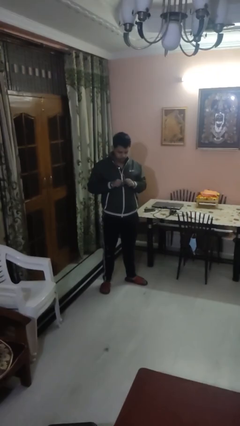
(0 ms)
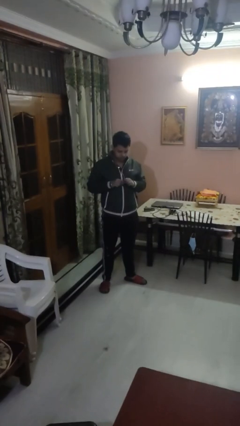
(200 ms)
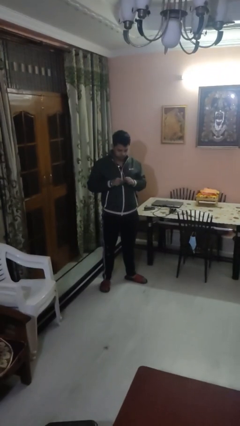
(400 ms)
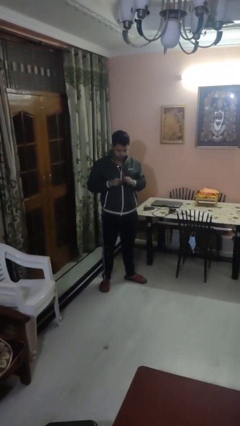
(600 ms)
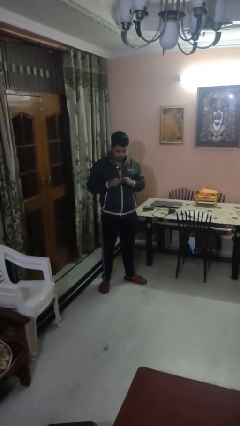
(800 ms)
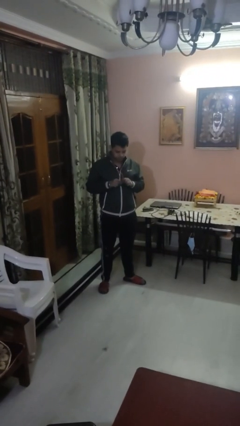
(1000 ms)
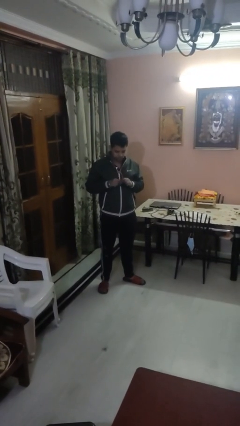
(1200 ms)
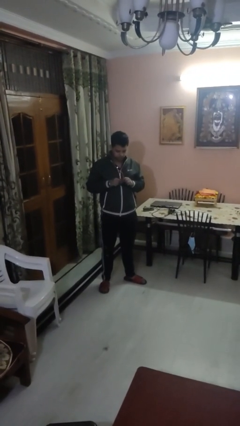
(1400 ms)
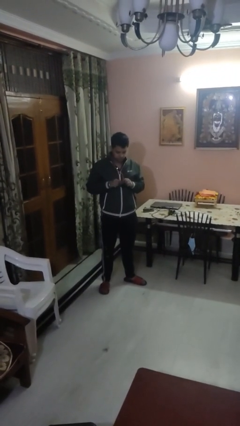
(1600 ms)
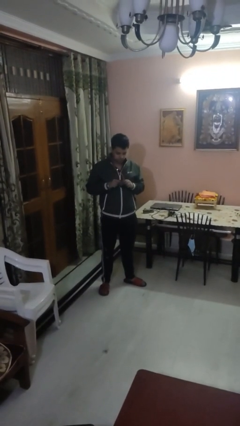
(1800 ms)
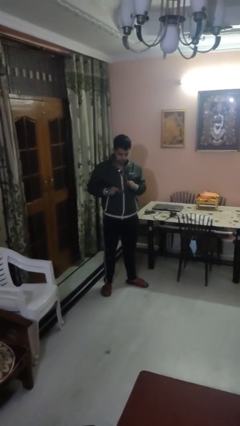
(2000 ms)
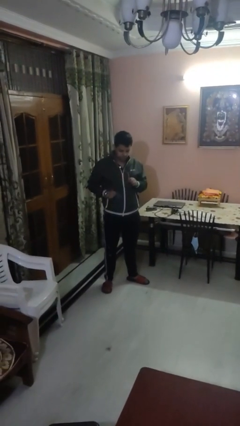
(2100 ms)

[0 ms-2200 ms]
person cleans eyeglasses

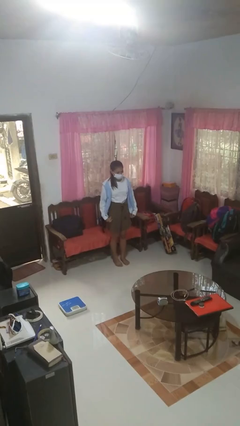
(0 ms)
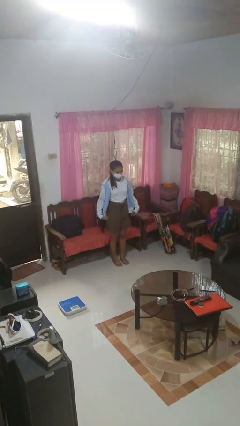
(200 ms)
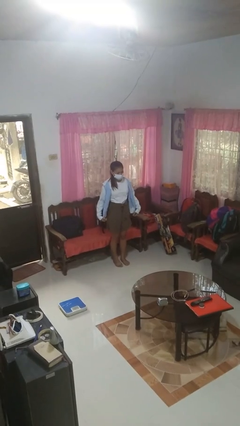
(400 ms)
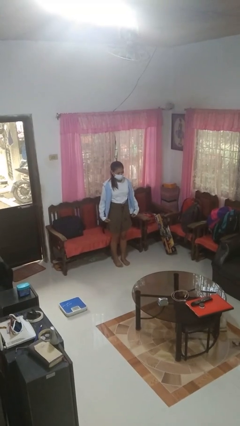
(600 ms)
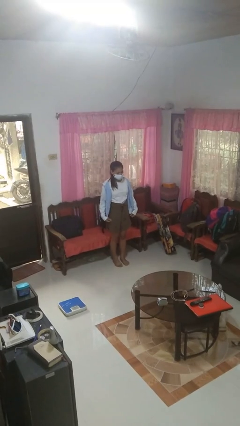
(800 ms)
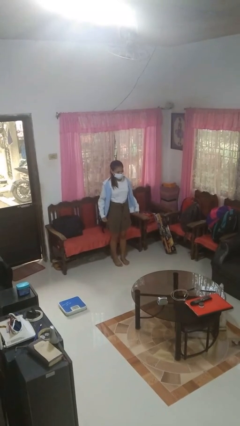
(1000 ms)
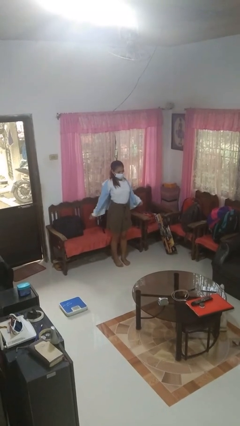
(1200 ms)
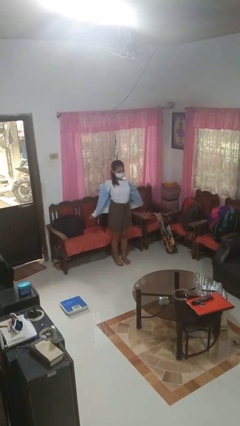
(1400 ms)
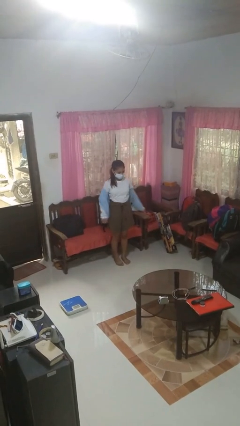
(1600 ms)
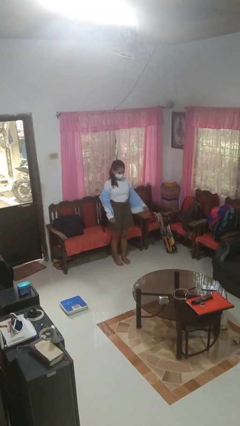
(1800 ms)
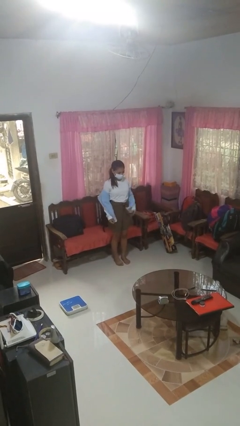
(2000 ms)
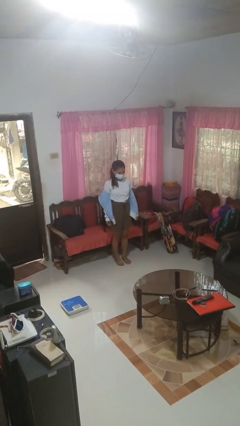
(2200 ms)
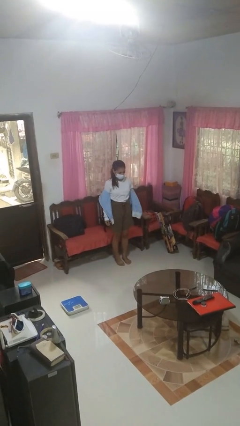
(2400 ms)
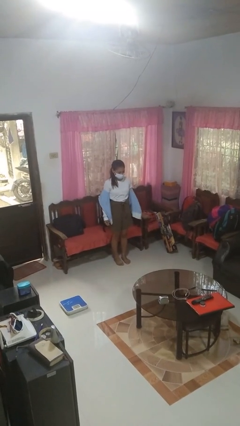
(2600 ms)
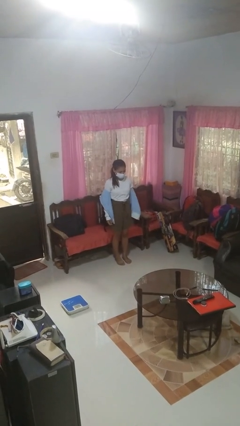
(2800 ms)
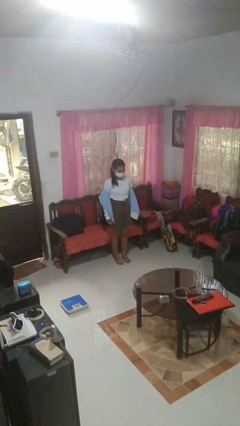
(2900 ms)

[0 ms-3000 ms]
person takes off jacket

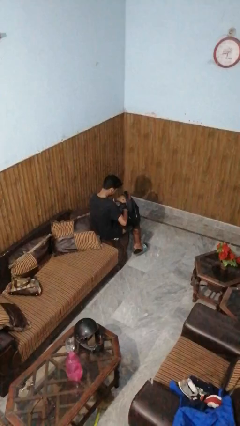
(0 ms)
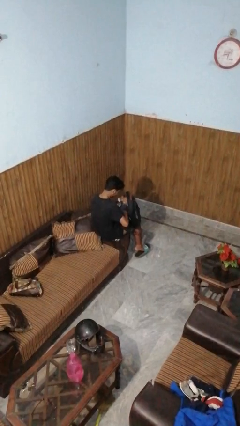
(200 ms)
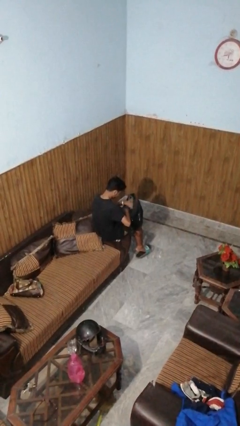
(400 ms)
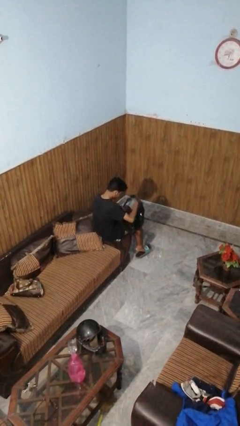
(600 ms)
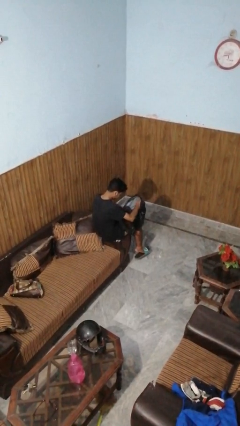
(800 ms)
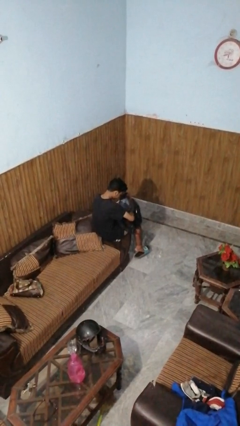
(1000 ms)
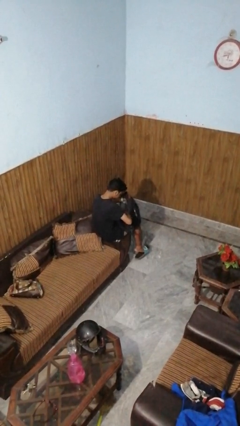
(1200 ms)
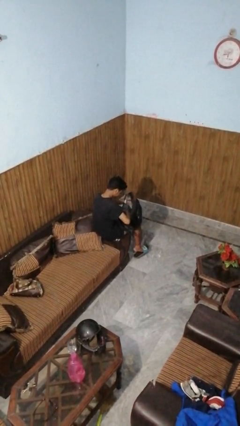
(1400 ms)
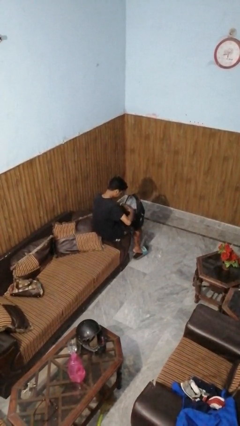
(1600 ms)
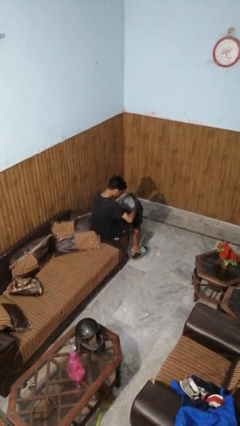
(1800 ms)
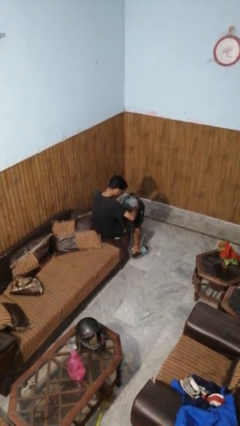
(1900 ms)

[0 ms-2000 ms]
person searches in backpack

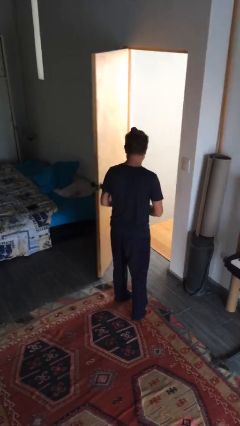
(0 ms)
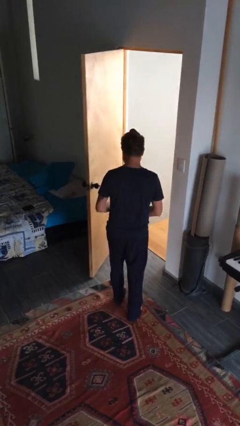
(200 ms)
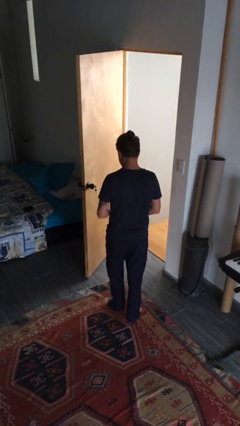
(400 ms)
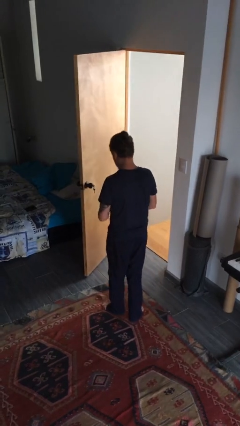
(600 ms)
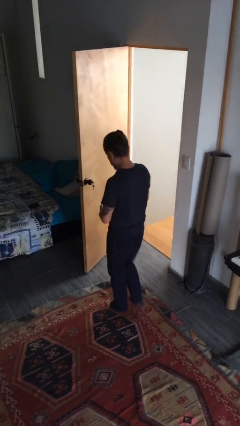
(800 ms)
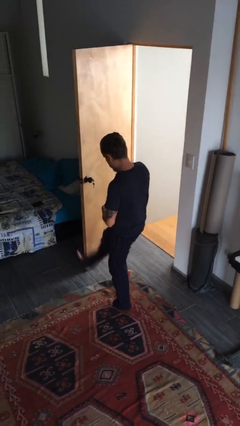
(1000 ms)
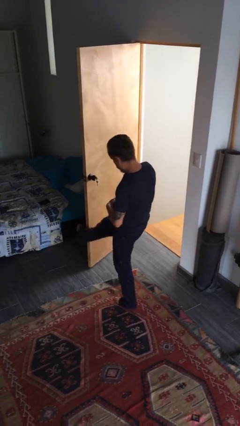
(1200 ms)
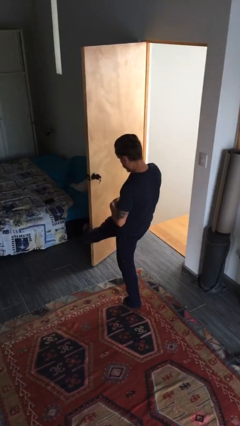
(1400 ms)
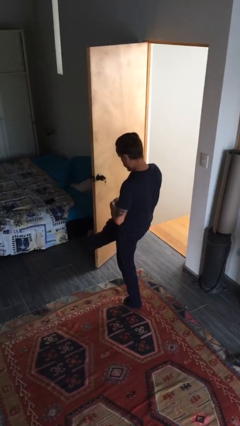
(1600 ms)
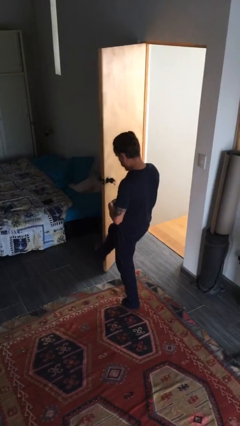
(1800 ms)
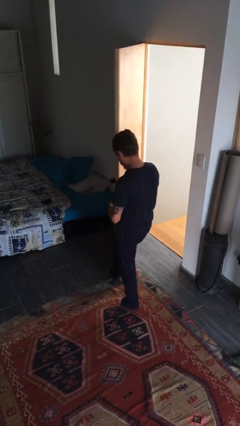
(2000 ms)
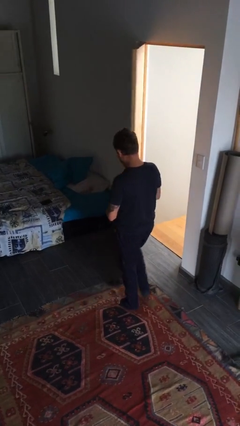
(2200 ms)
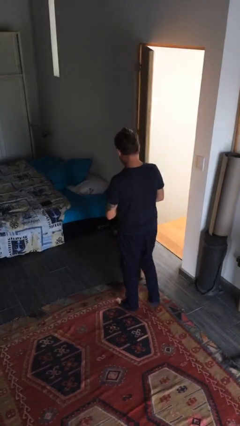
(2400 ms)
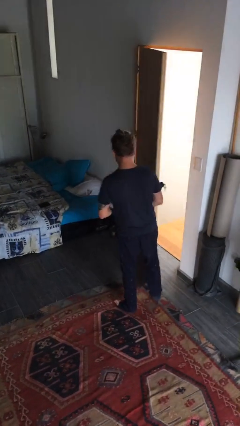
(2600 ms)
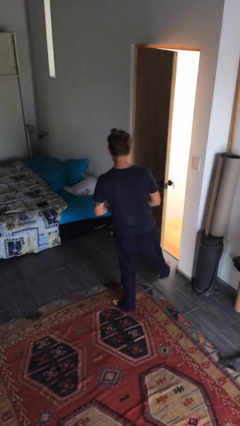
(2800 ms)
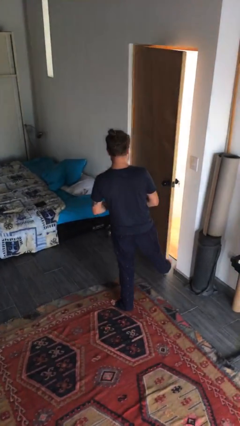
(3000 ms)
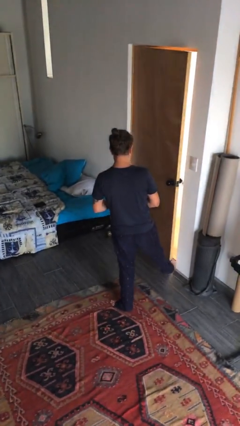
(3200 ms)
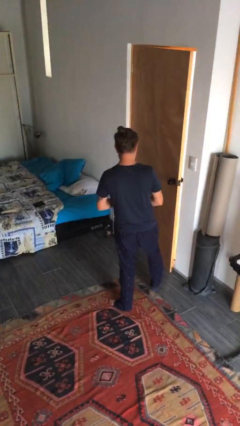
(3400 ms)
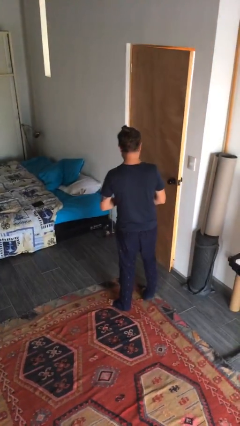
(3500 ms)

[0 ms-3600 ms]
person closes door with foot

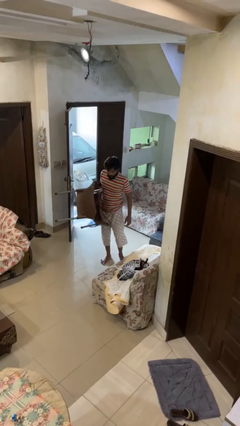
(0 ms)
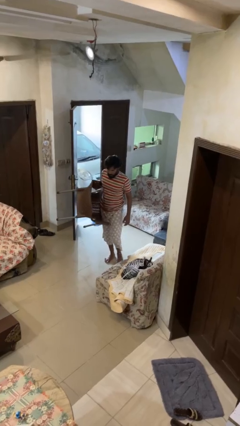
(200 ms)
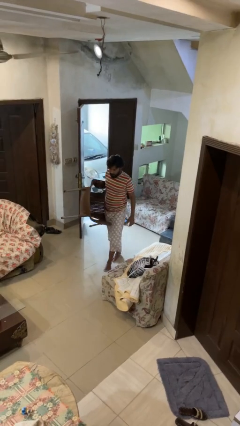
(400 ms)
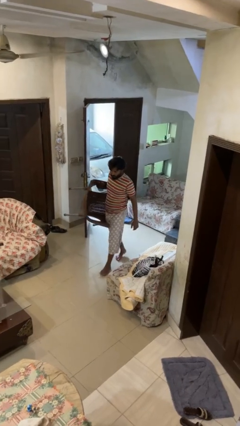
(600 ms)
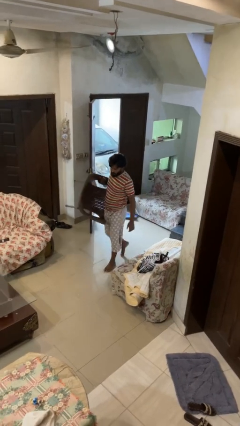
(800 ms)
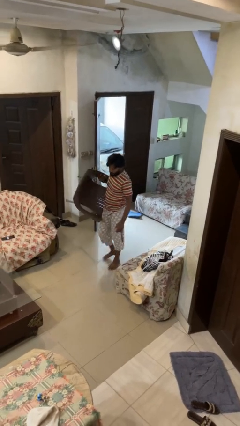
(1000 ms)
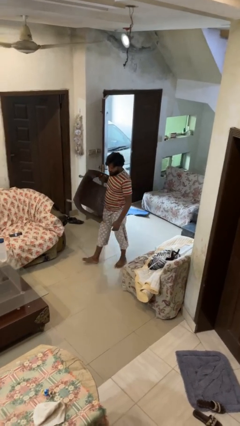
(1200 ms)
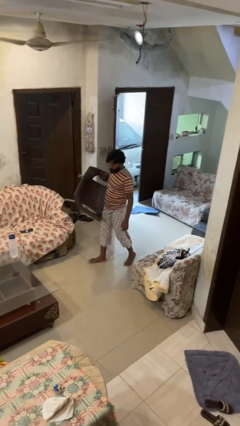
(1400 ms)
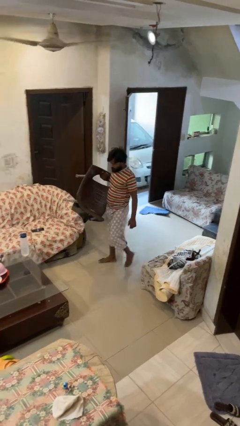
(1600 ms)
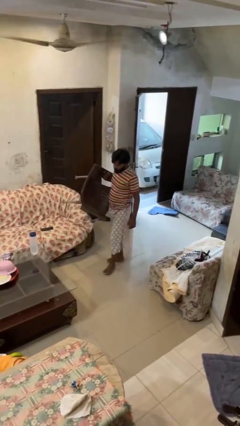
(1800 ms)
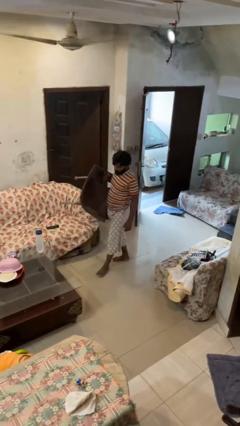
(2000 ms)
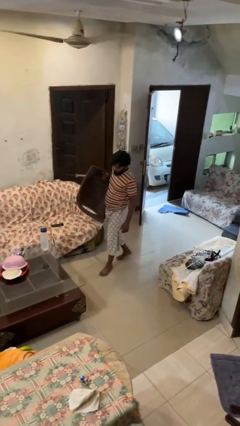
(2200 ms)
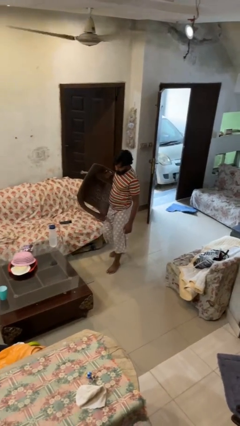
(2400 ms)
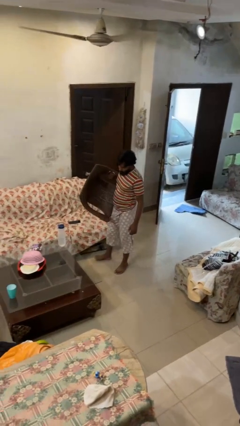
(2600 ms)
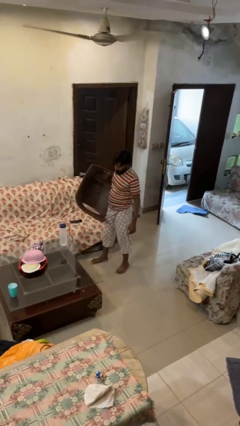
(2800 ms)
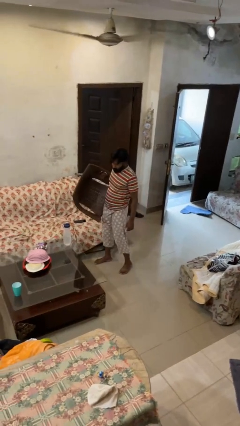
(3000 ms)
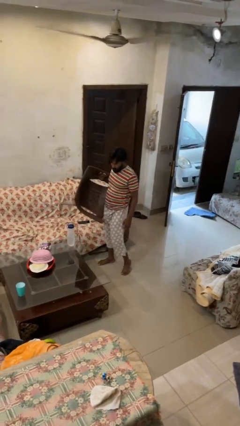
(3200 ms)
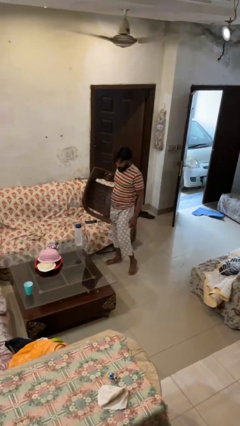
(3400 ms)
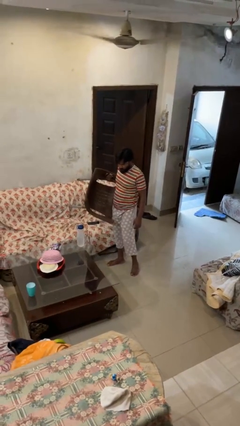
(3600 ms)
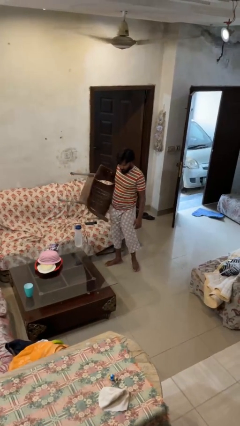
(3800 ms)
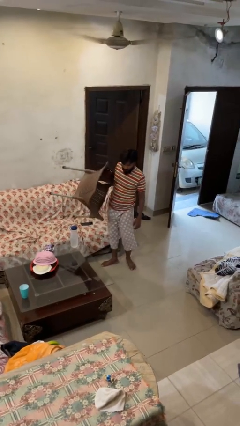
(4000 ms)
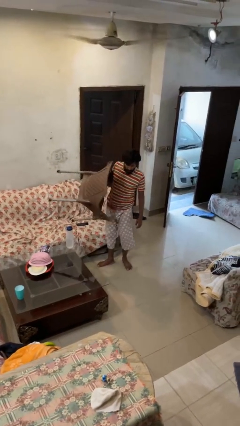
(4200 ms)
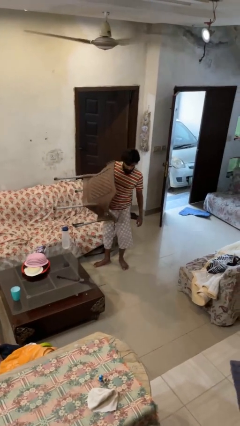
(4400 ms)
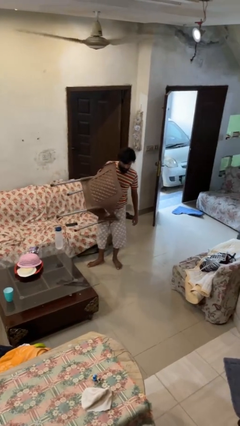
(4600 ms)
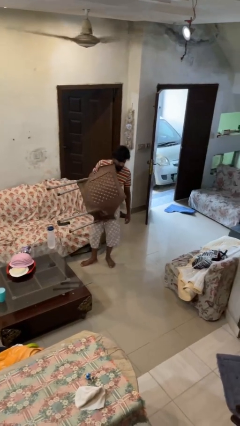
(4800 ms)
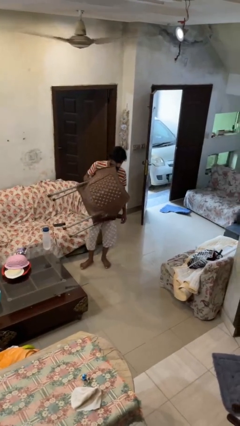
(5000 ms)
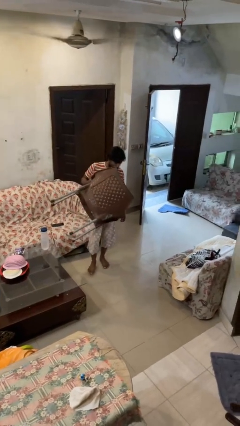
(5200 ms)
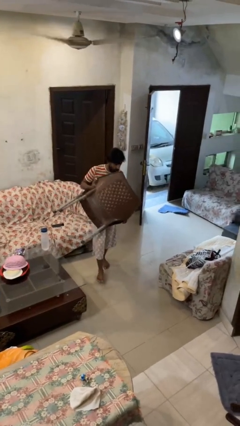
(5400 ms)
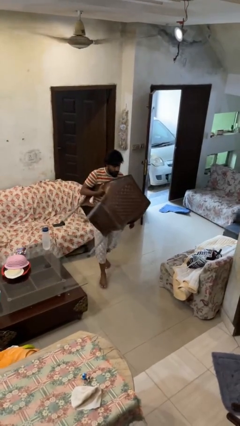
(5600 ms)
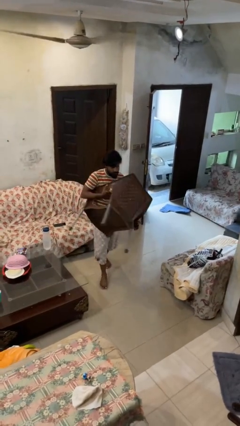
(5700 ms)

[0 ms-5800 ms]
person carries furniture

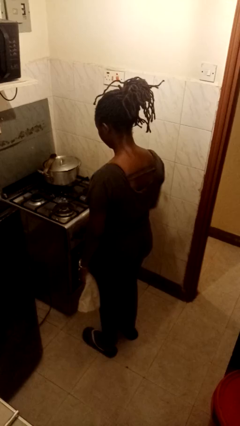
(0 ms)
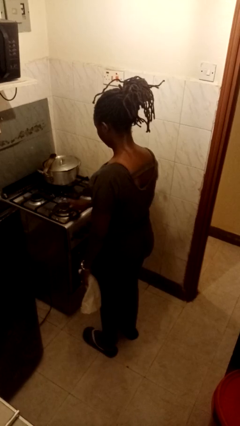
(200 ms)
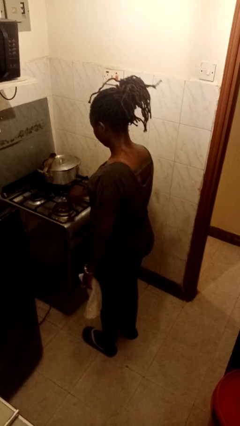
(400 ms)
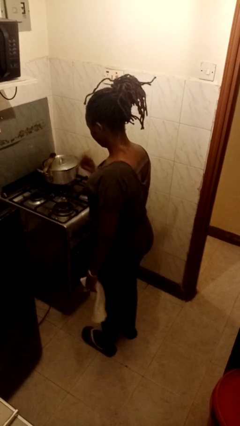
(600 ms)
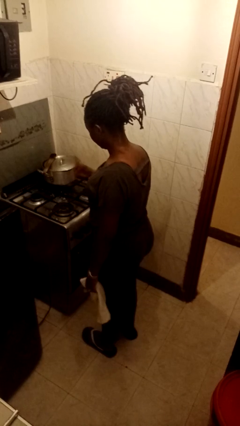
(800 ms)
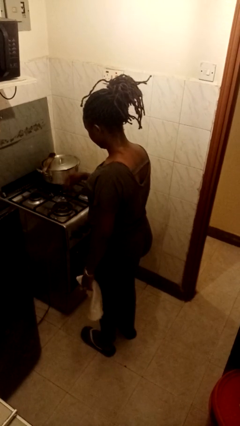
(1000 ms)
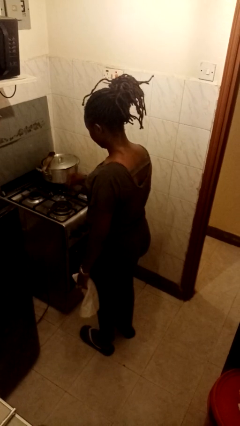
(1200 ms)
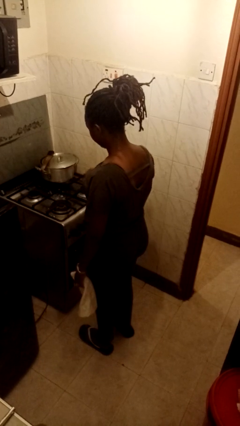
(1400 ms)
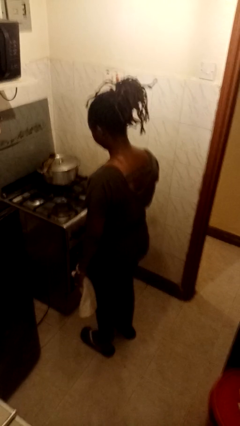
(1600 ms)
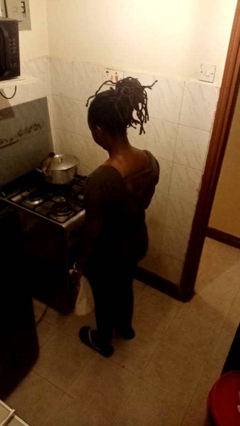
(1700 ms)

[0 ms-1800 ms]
person burns hand
